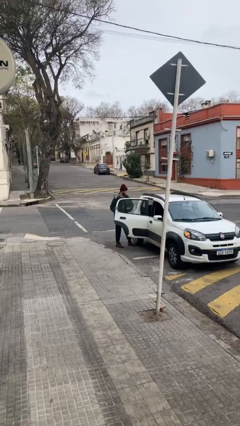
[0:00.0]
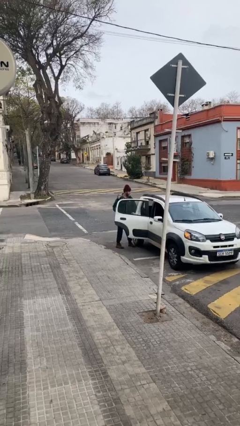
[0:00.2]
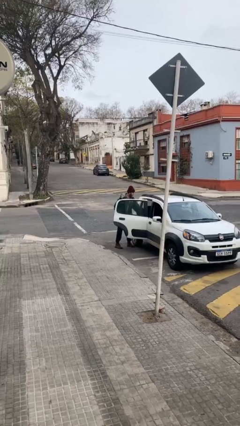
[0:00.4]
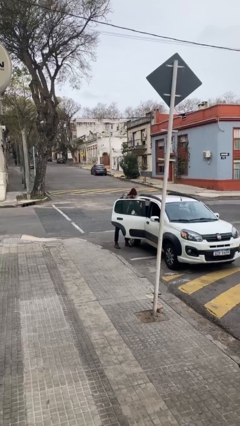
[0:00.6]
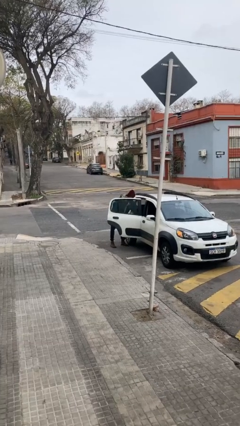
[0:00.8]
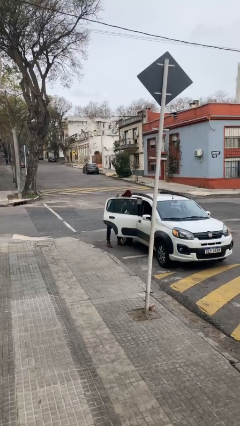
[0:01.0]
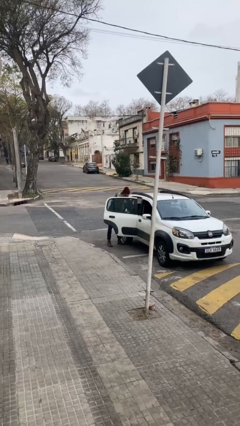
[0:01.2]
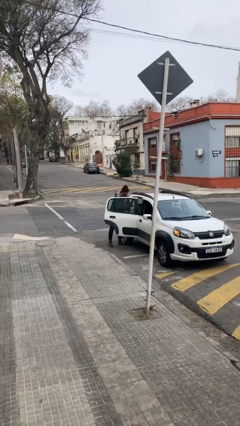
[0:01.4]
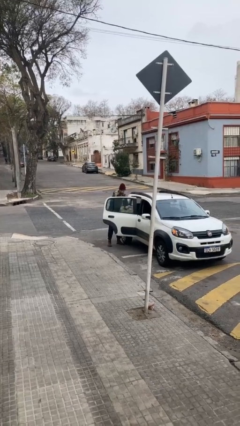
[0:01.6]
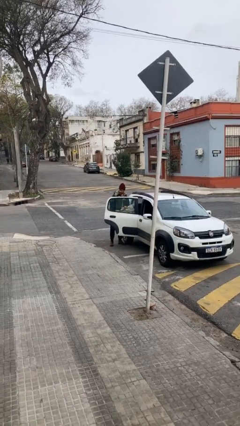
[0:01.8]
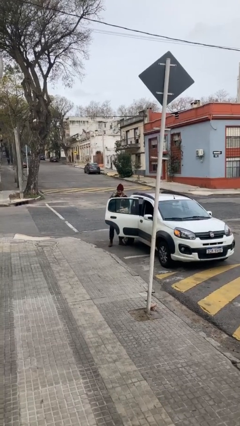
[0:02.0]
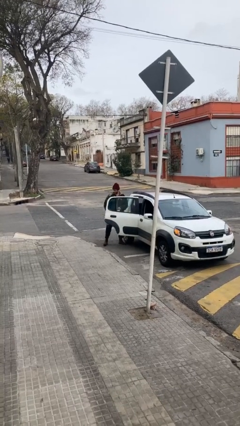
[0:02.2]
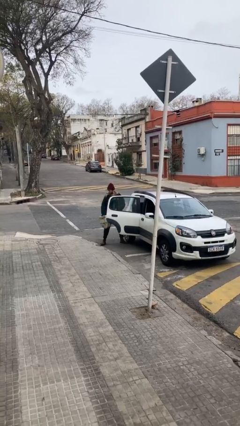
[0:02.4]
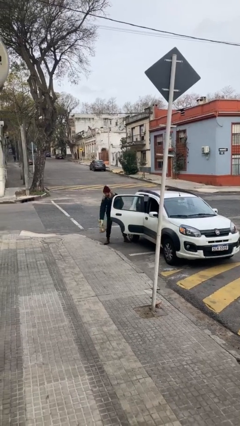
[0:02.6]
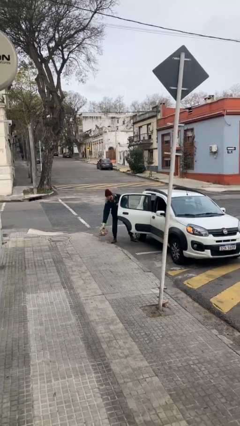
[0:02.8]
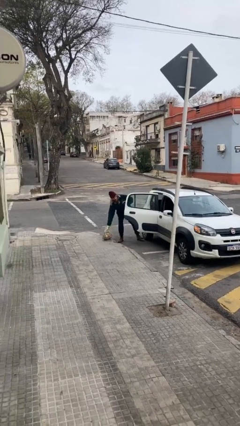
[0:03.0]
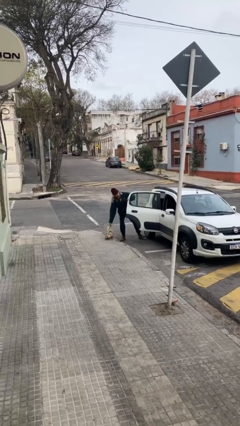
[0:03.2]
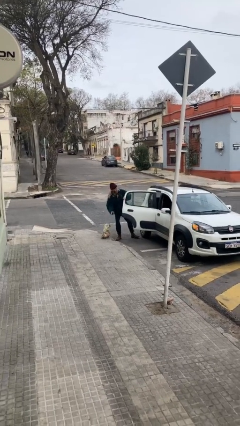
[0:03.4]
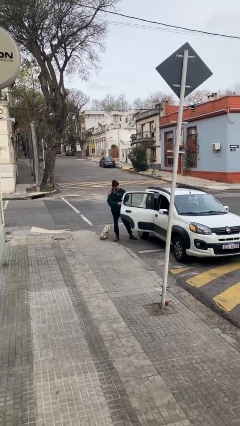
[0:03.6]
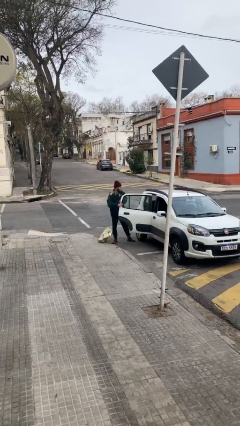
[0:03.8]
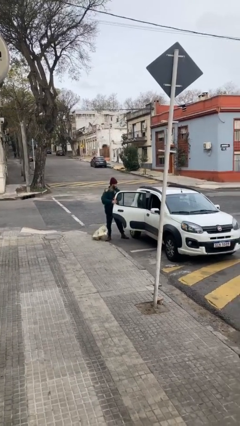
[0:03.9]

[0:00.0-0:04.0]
person unloads car

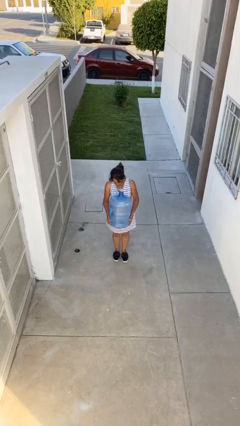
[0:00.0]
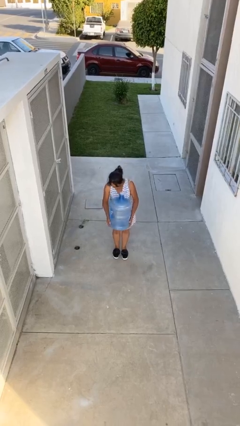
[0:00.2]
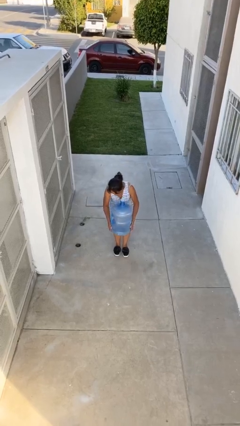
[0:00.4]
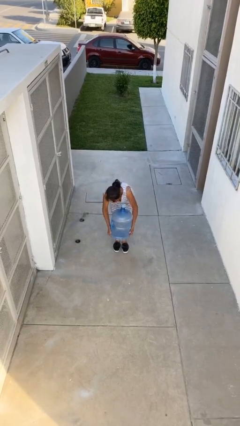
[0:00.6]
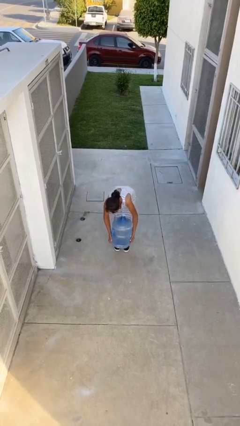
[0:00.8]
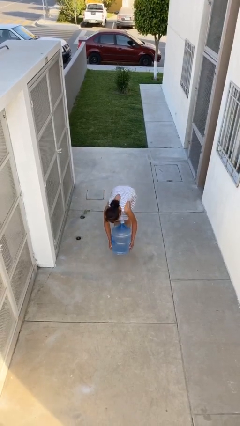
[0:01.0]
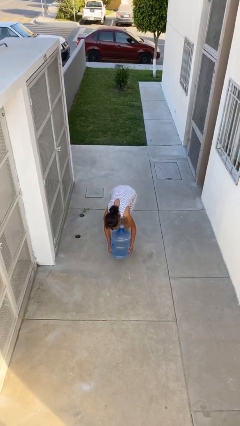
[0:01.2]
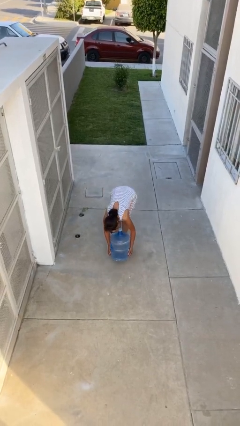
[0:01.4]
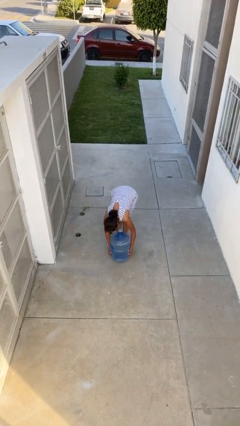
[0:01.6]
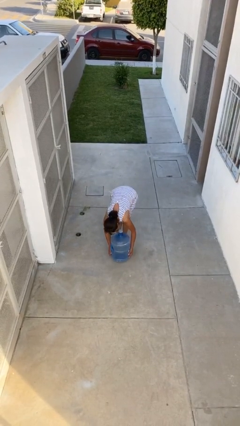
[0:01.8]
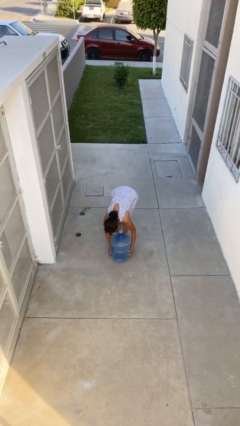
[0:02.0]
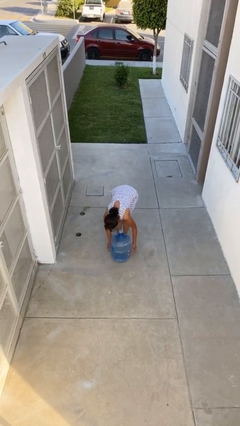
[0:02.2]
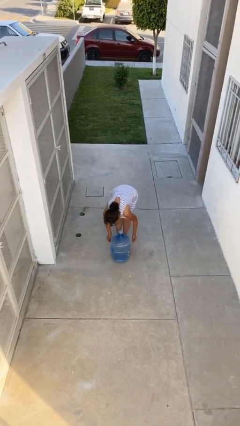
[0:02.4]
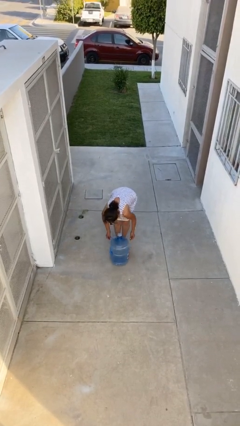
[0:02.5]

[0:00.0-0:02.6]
person puts down object on floor

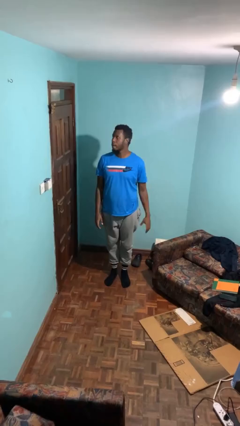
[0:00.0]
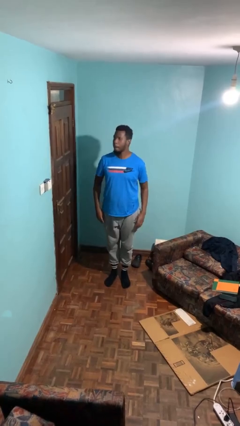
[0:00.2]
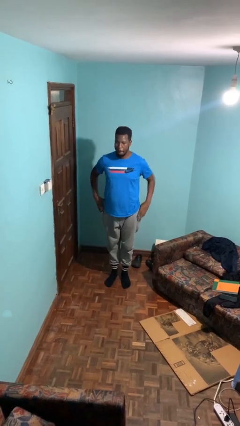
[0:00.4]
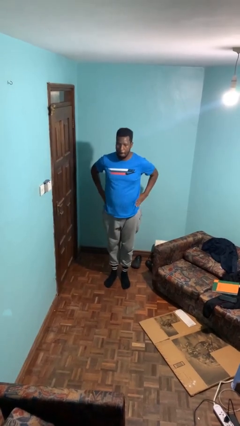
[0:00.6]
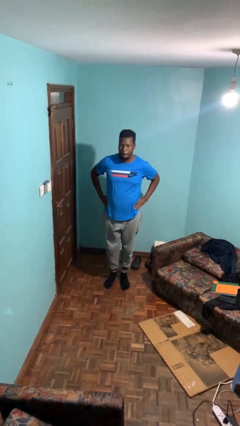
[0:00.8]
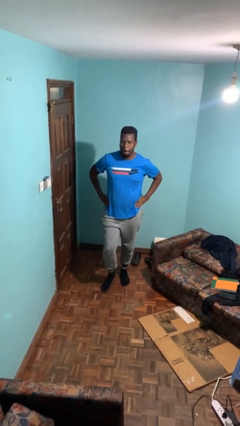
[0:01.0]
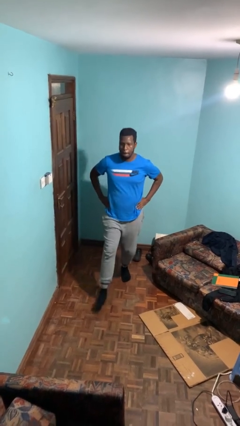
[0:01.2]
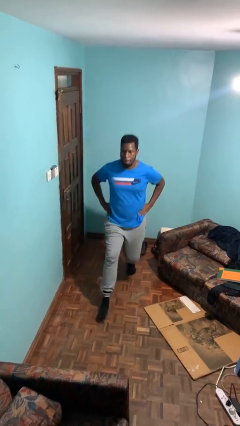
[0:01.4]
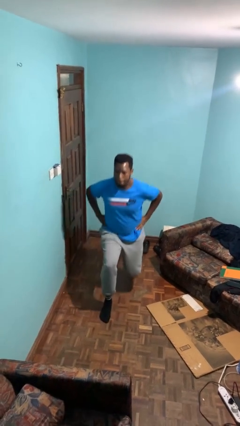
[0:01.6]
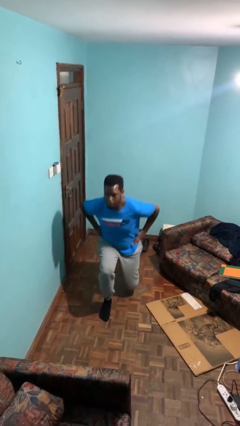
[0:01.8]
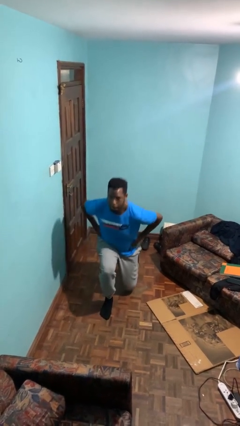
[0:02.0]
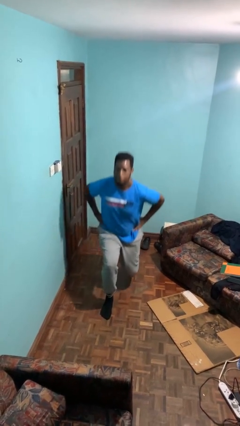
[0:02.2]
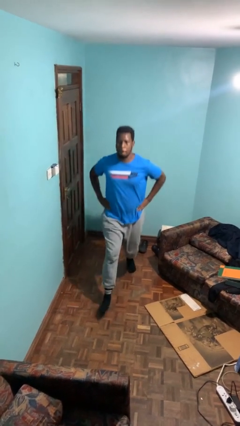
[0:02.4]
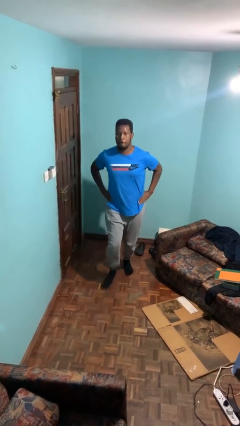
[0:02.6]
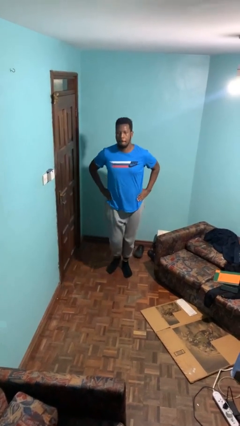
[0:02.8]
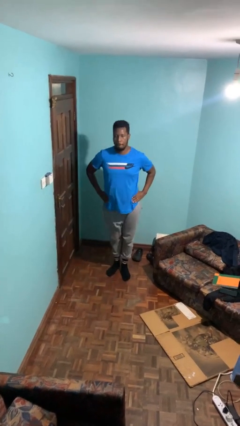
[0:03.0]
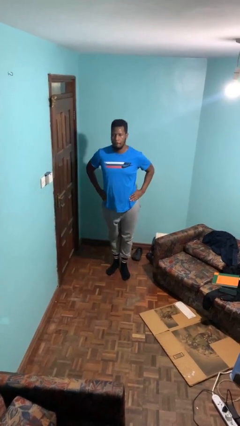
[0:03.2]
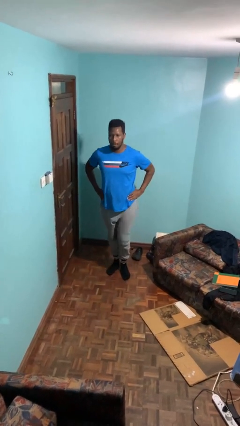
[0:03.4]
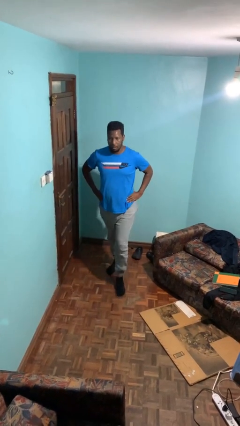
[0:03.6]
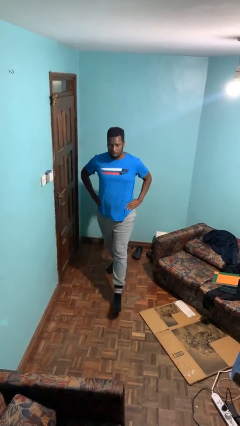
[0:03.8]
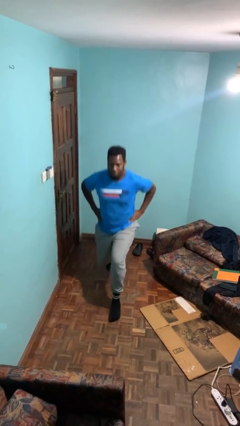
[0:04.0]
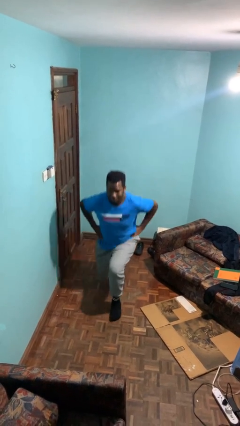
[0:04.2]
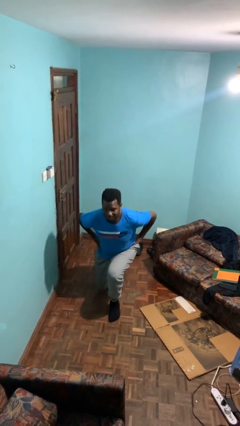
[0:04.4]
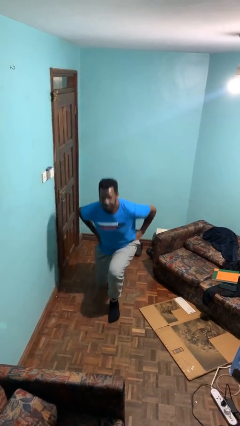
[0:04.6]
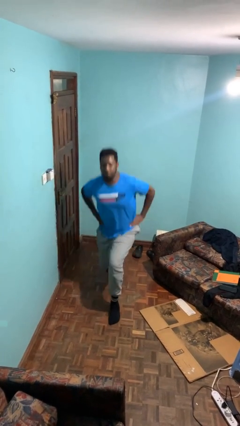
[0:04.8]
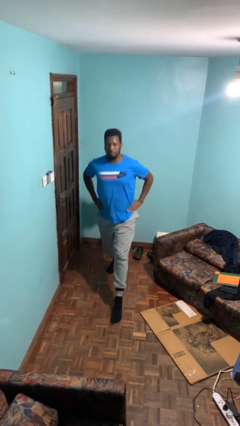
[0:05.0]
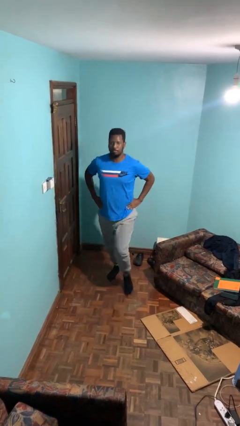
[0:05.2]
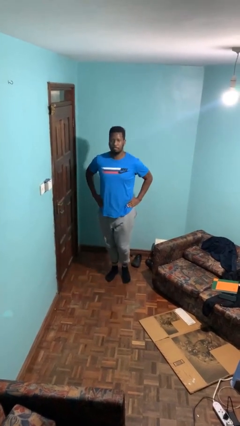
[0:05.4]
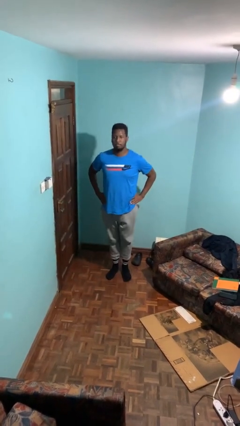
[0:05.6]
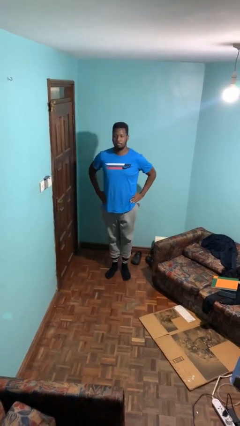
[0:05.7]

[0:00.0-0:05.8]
person exercises with lunges

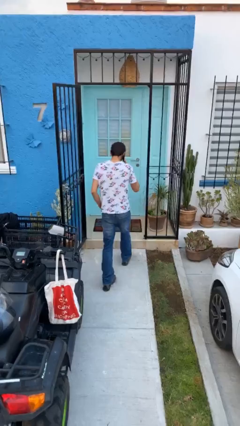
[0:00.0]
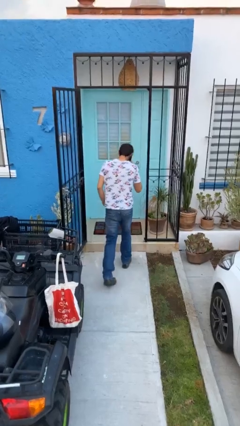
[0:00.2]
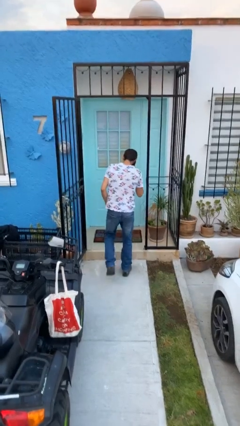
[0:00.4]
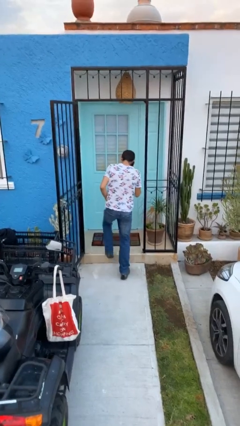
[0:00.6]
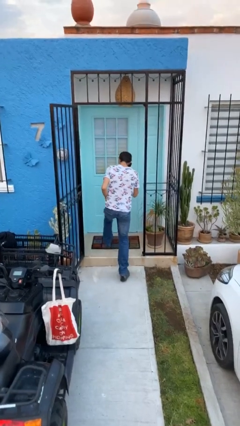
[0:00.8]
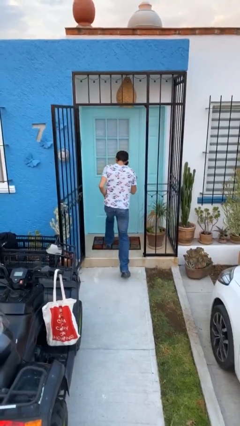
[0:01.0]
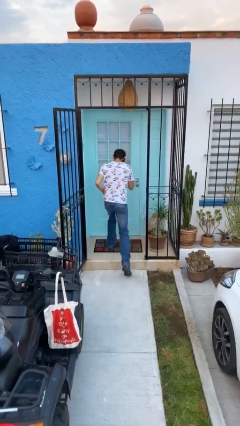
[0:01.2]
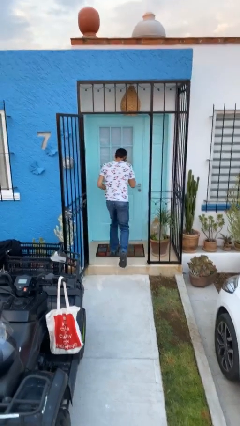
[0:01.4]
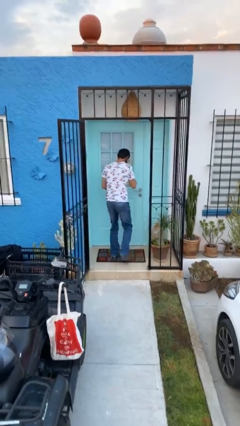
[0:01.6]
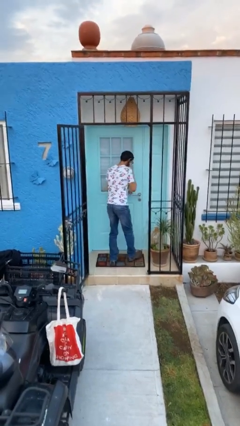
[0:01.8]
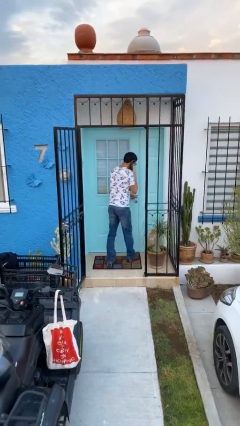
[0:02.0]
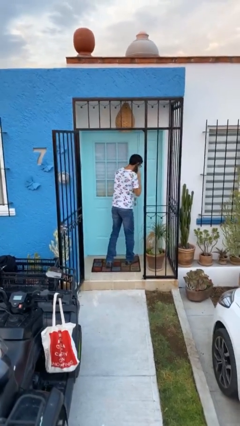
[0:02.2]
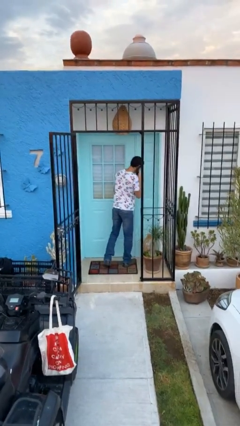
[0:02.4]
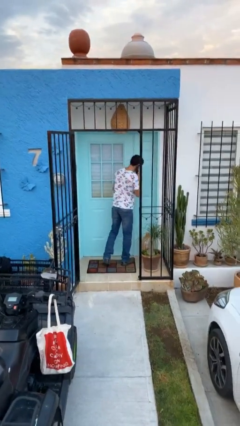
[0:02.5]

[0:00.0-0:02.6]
person exits scene through structure

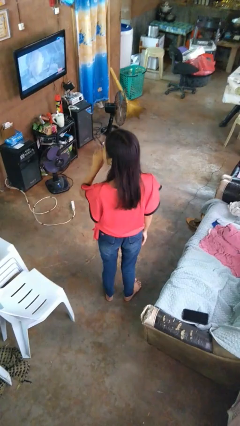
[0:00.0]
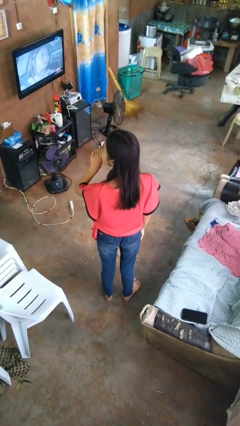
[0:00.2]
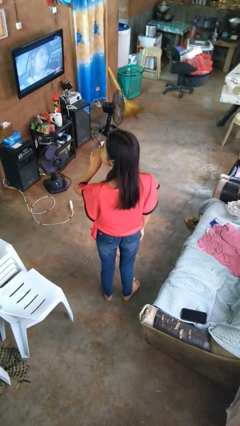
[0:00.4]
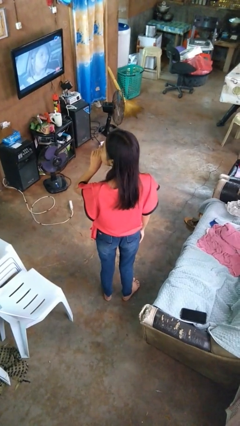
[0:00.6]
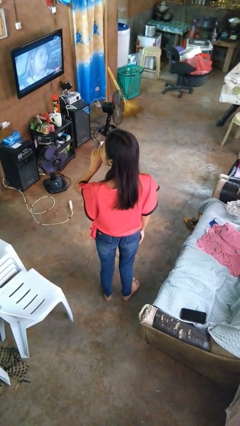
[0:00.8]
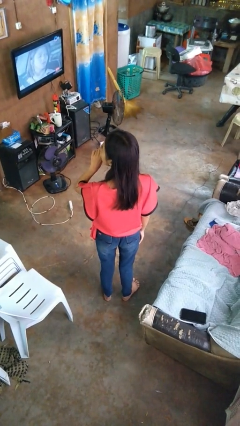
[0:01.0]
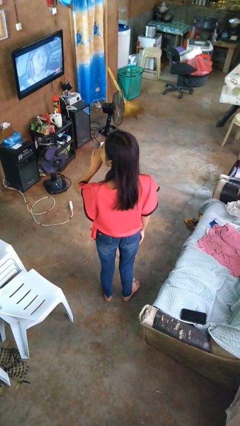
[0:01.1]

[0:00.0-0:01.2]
person gestures be quiet

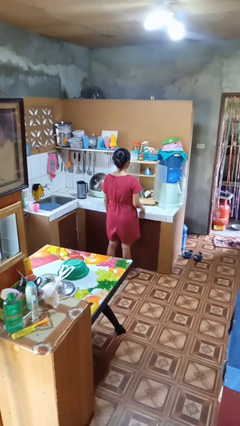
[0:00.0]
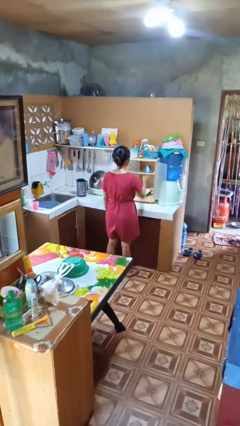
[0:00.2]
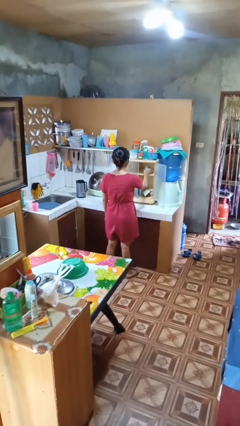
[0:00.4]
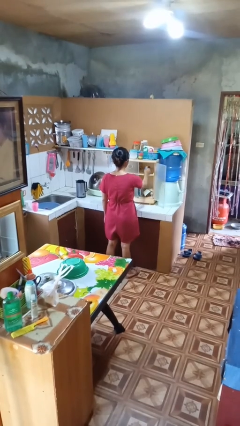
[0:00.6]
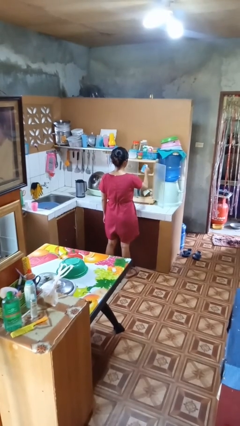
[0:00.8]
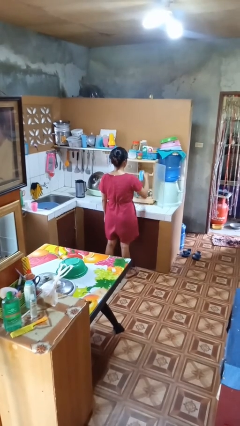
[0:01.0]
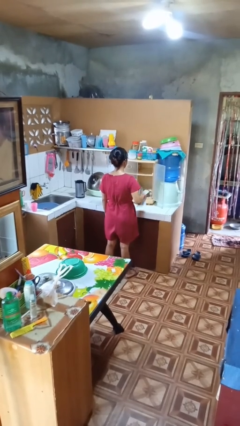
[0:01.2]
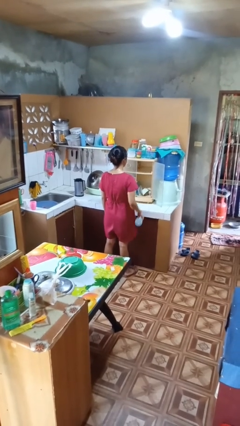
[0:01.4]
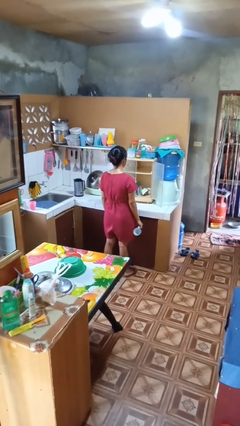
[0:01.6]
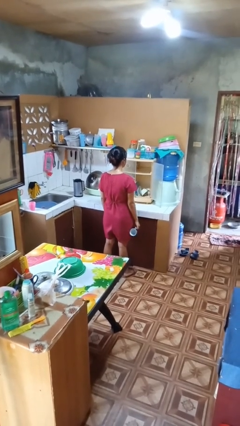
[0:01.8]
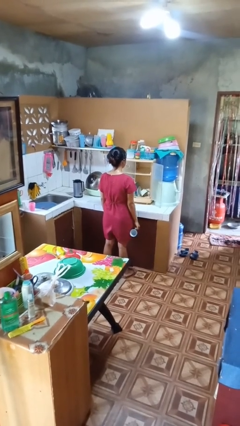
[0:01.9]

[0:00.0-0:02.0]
person takes object from cabinet
